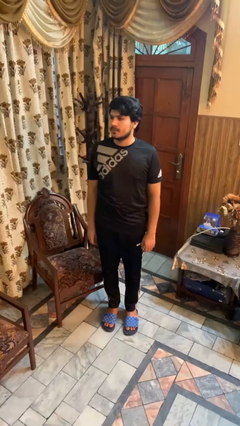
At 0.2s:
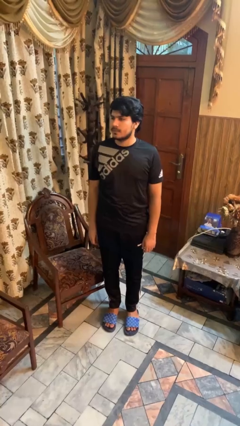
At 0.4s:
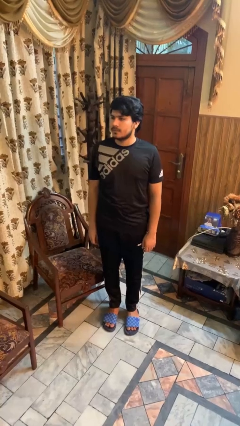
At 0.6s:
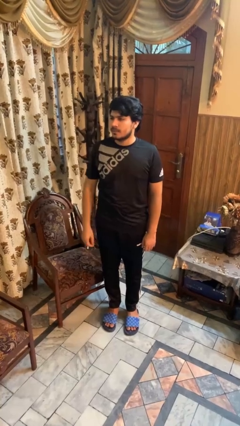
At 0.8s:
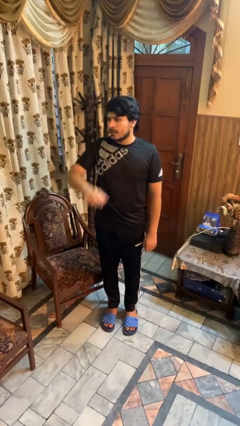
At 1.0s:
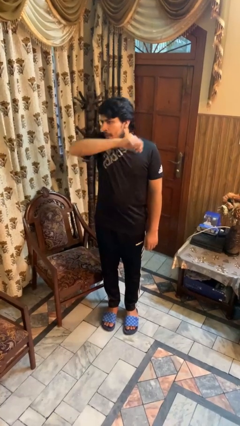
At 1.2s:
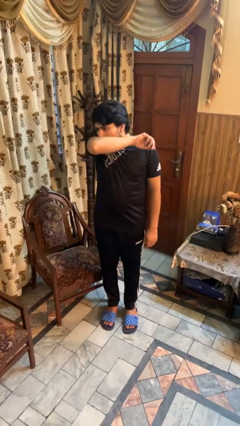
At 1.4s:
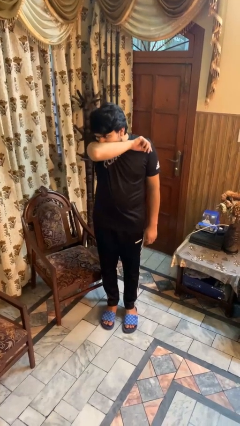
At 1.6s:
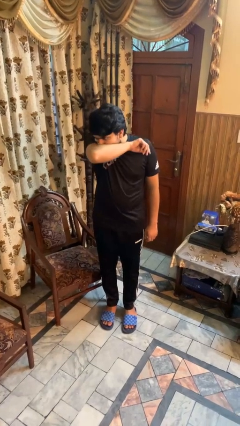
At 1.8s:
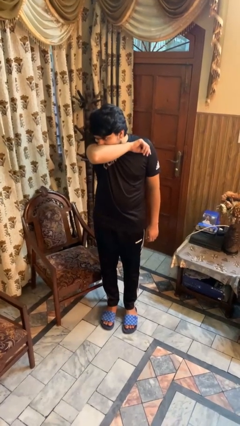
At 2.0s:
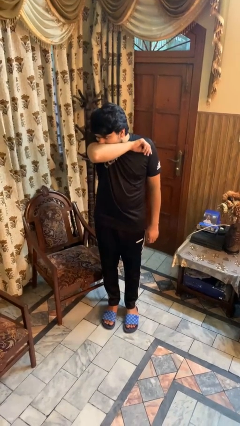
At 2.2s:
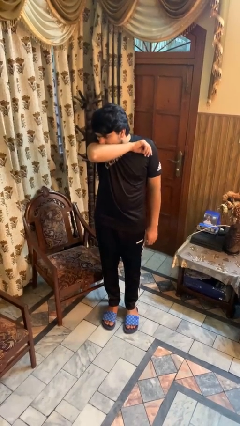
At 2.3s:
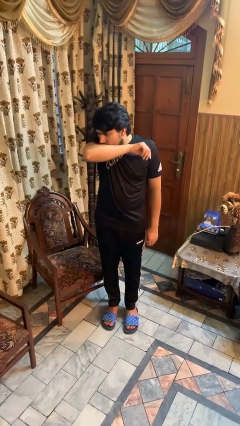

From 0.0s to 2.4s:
person sneezes into arm

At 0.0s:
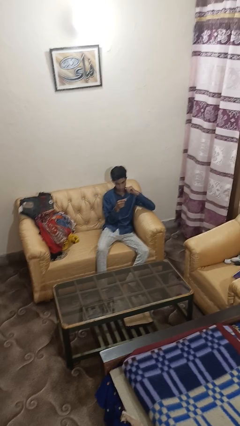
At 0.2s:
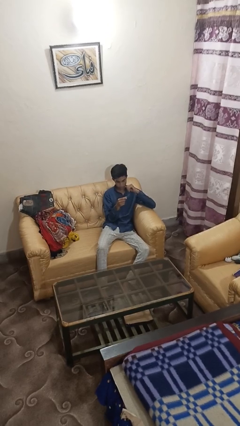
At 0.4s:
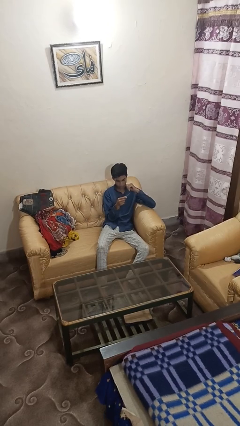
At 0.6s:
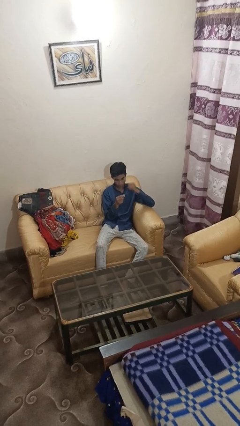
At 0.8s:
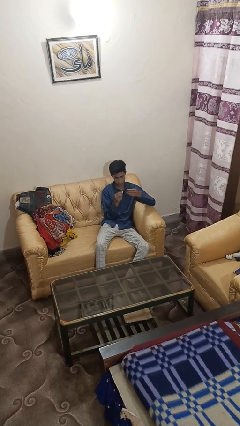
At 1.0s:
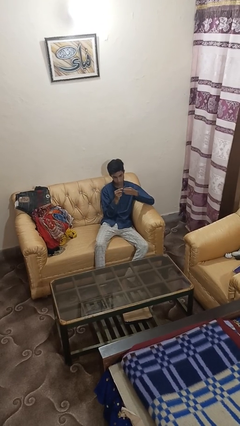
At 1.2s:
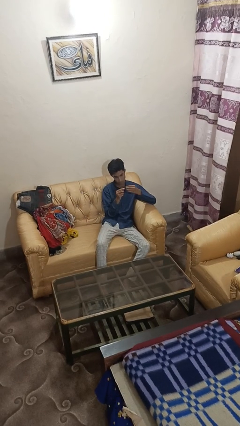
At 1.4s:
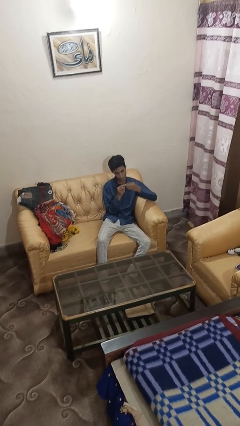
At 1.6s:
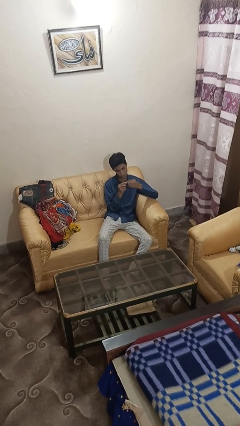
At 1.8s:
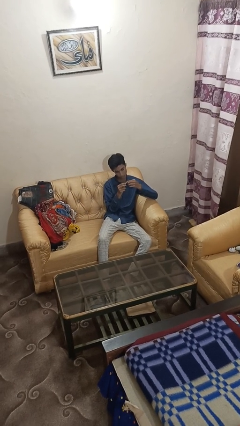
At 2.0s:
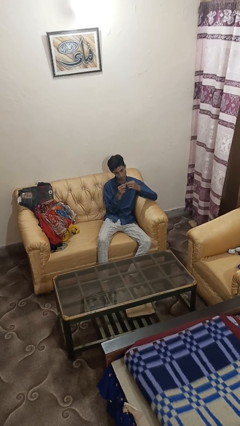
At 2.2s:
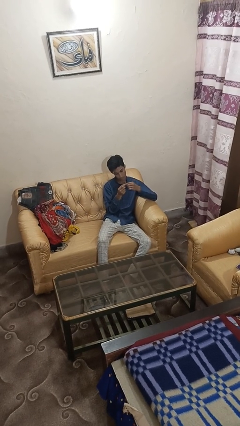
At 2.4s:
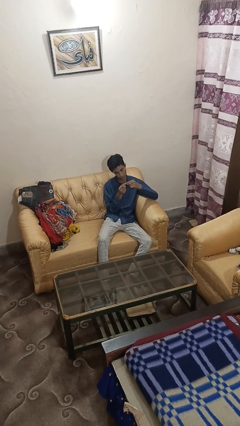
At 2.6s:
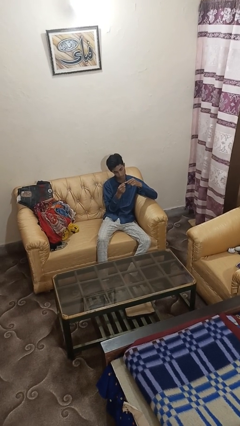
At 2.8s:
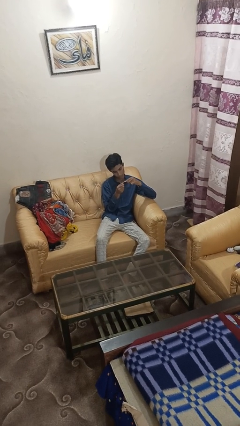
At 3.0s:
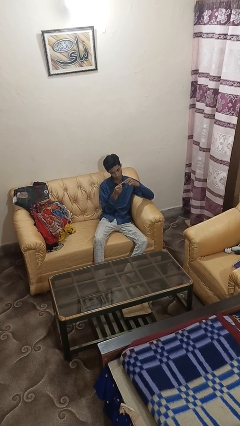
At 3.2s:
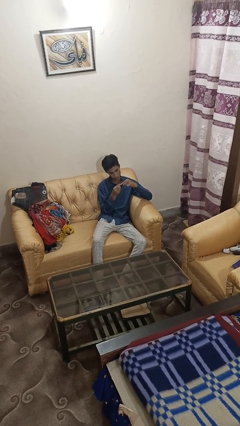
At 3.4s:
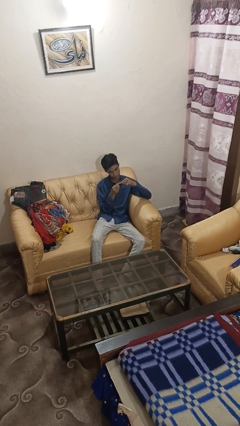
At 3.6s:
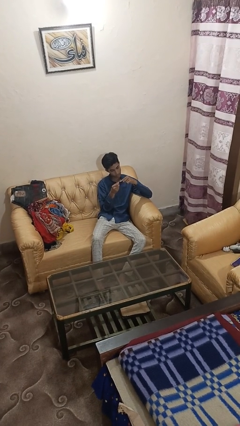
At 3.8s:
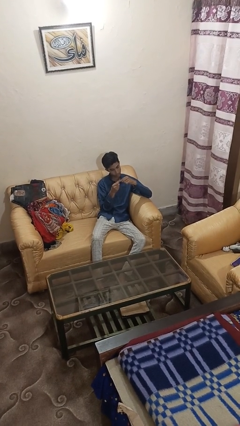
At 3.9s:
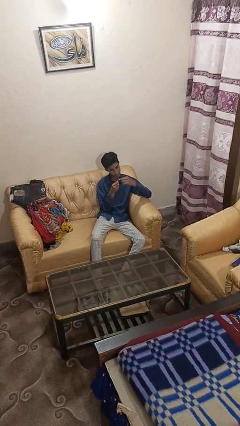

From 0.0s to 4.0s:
person files fingernails

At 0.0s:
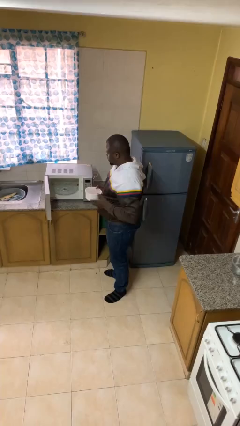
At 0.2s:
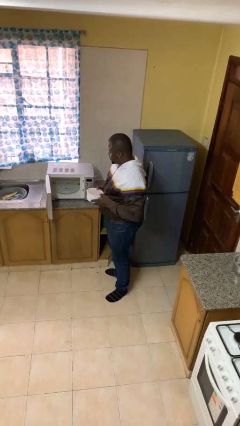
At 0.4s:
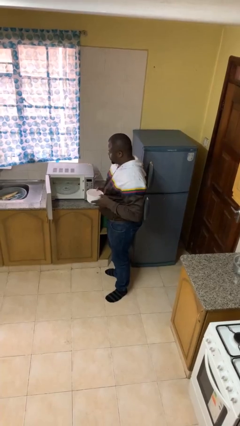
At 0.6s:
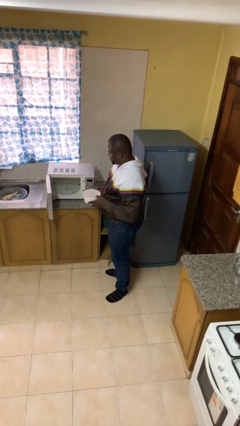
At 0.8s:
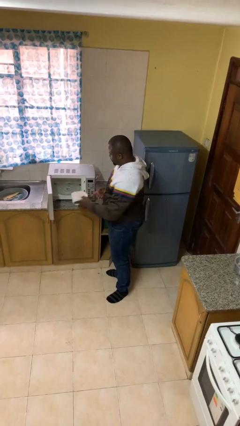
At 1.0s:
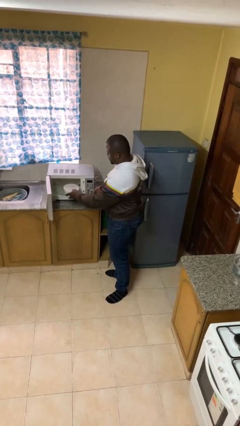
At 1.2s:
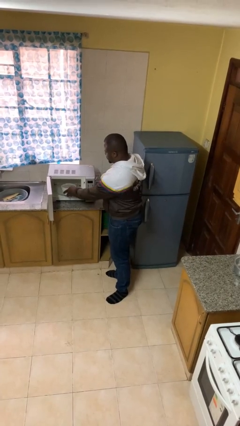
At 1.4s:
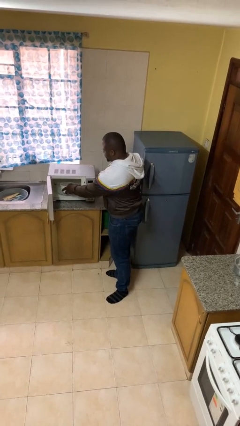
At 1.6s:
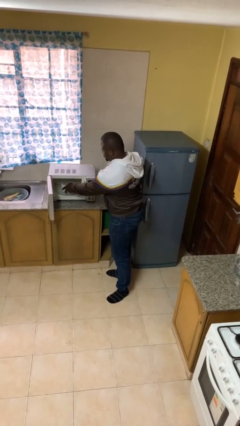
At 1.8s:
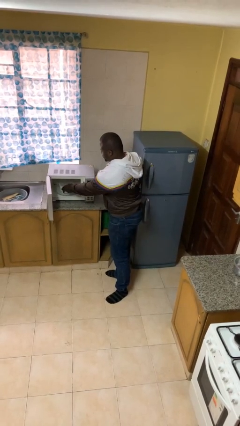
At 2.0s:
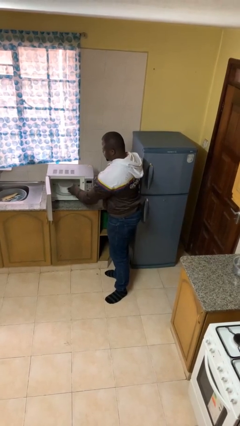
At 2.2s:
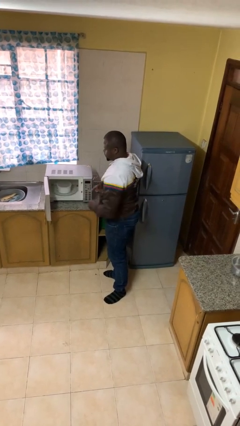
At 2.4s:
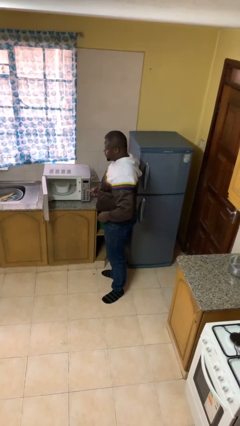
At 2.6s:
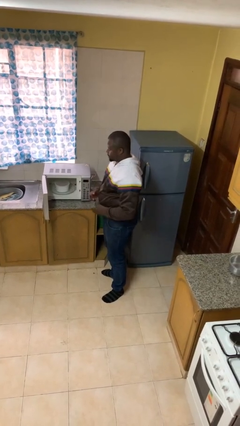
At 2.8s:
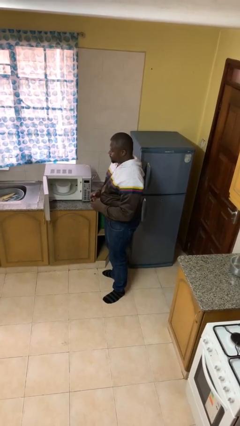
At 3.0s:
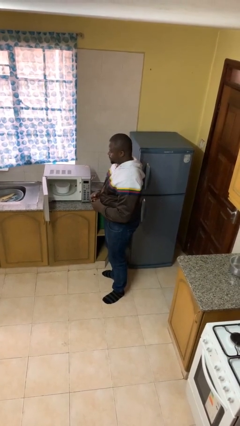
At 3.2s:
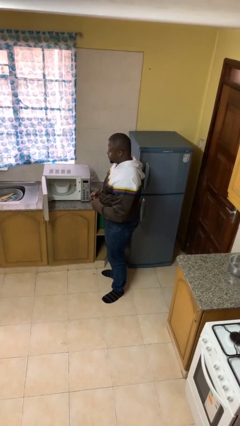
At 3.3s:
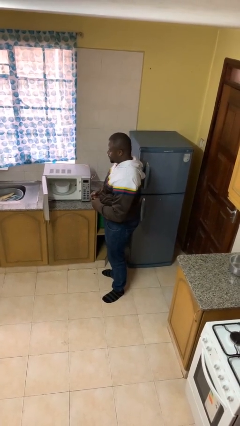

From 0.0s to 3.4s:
person puts object into microwave

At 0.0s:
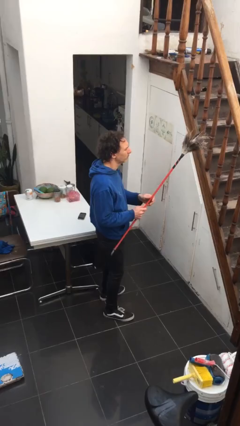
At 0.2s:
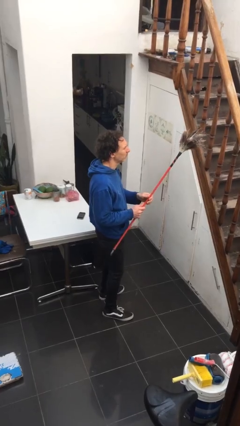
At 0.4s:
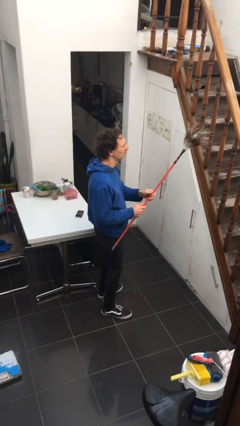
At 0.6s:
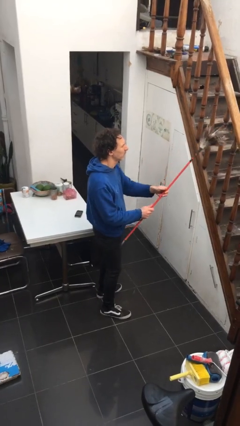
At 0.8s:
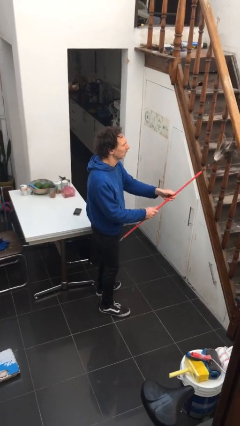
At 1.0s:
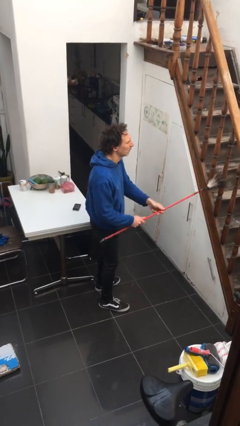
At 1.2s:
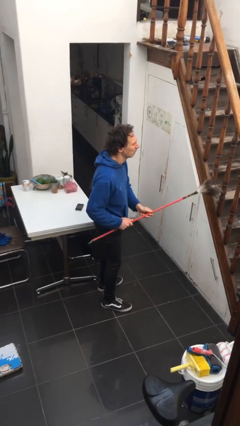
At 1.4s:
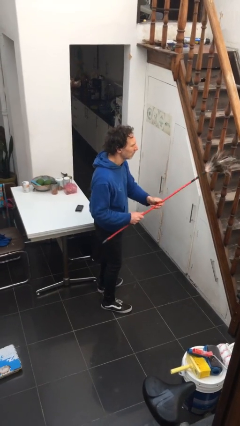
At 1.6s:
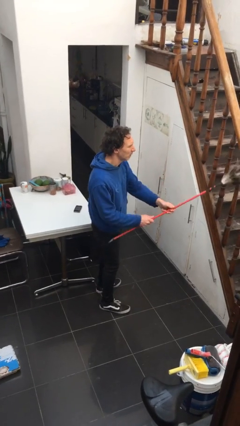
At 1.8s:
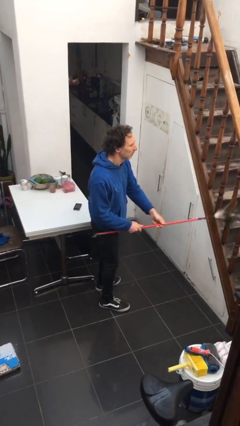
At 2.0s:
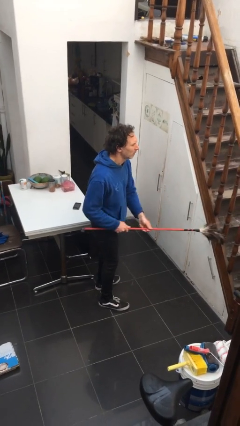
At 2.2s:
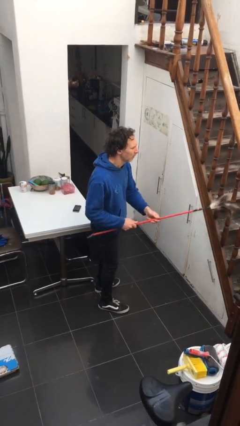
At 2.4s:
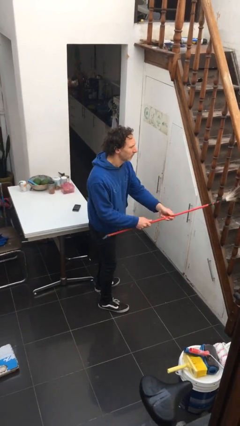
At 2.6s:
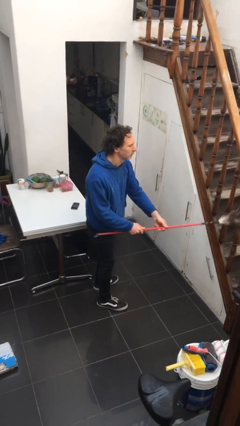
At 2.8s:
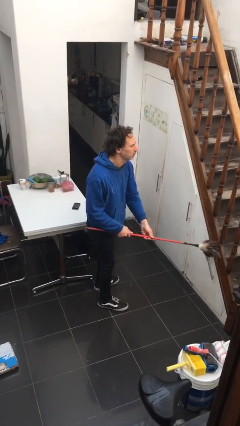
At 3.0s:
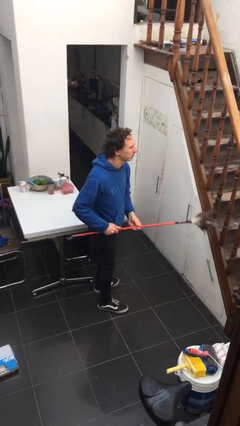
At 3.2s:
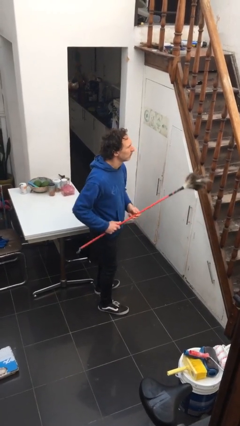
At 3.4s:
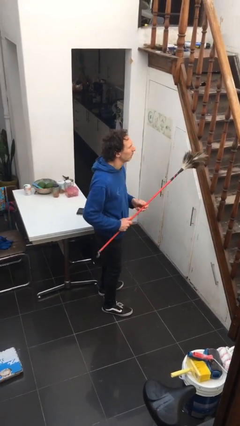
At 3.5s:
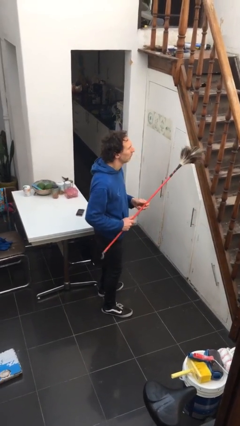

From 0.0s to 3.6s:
person dusts furniture

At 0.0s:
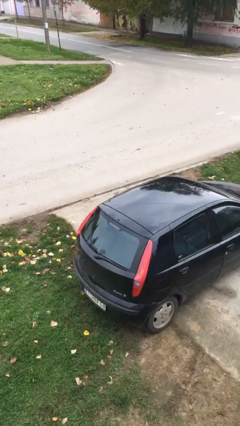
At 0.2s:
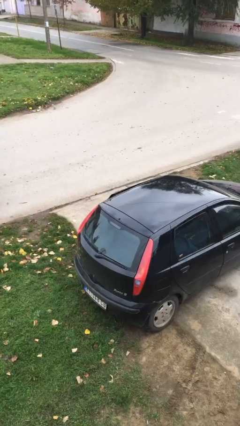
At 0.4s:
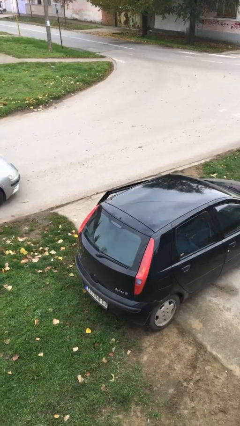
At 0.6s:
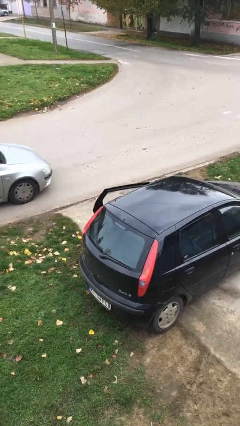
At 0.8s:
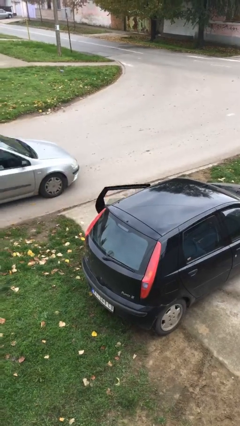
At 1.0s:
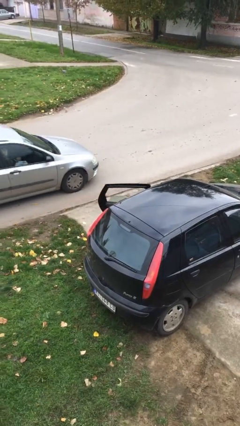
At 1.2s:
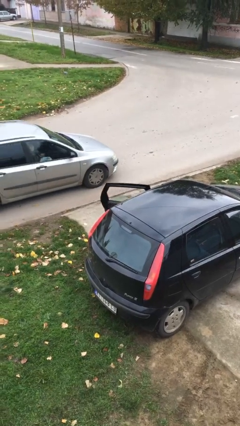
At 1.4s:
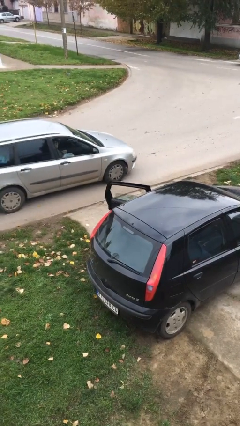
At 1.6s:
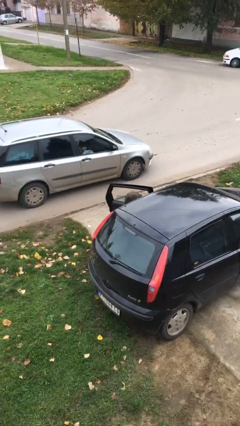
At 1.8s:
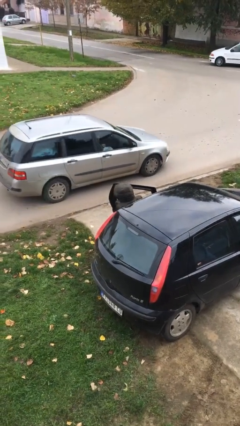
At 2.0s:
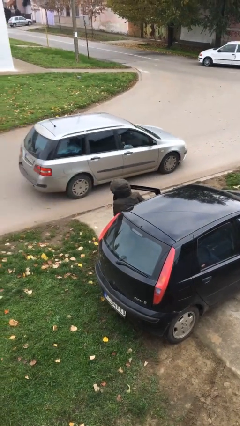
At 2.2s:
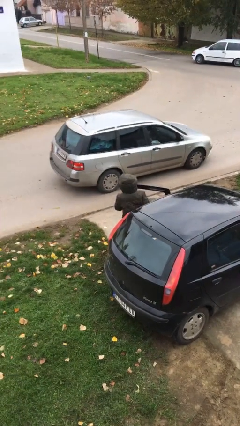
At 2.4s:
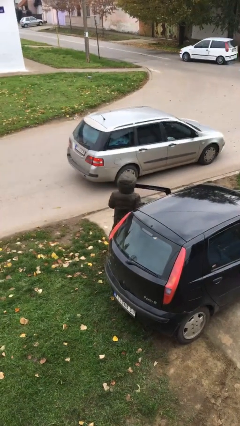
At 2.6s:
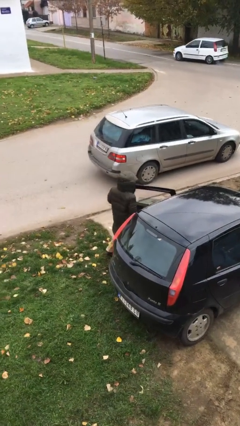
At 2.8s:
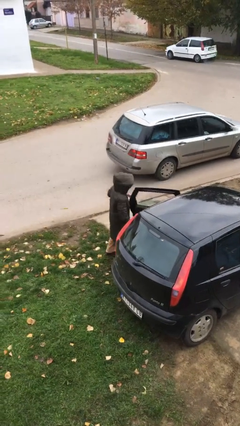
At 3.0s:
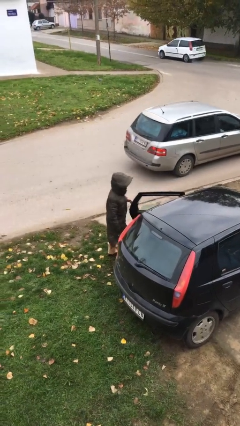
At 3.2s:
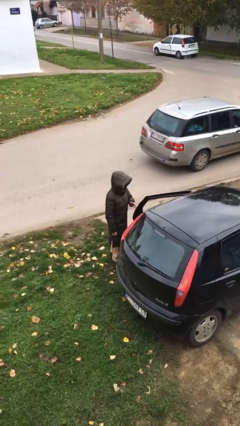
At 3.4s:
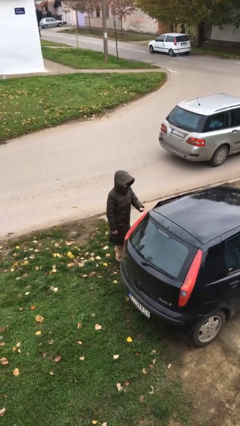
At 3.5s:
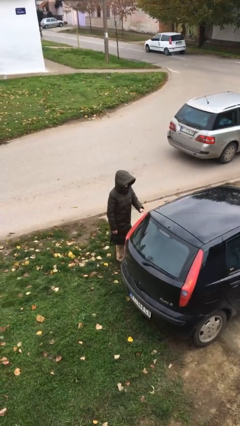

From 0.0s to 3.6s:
person exits car

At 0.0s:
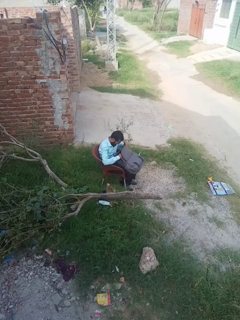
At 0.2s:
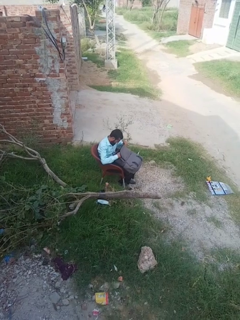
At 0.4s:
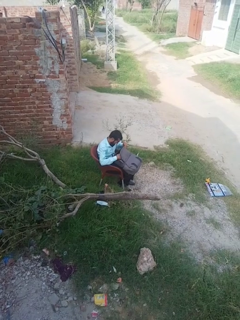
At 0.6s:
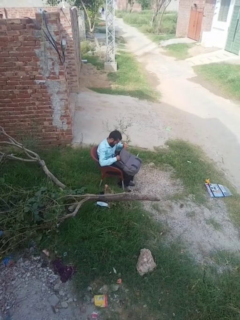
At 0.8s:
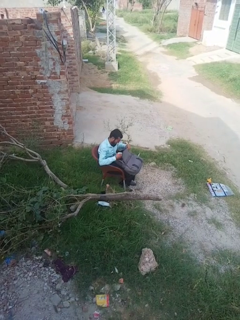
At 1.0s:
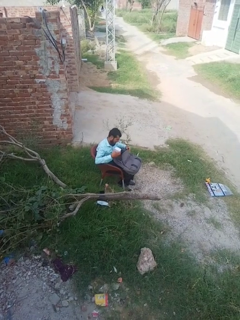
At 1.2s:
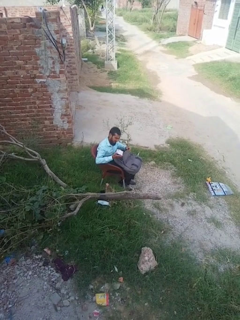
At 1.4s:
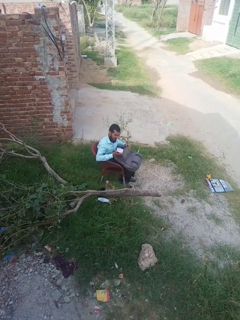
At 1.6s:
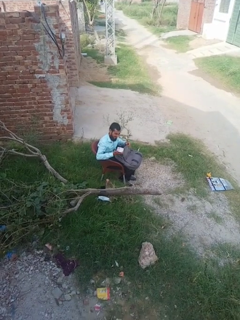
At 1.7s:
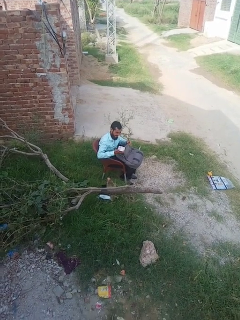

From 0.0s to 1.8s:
person takes object from backpack
